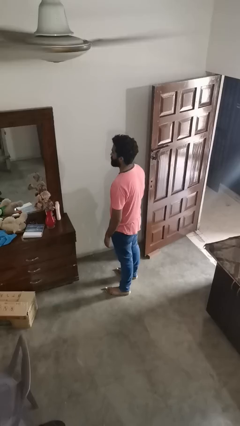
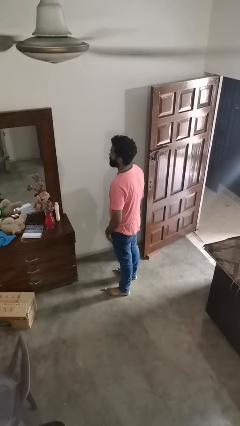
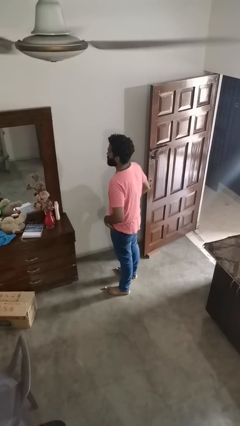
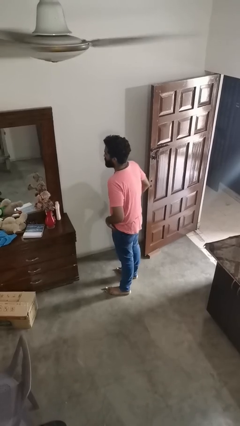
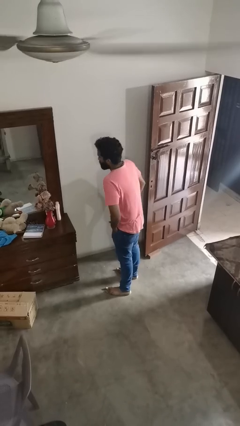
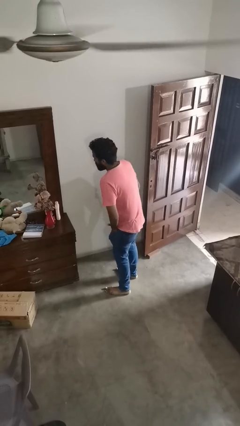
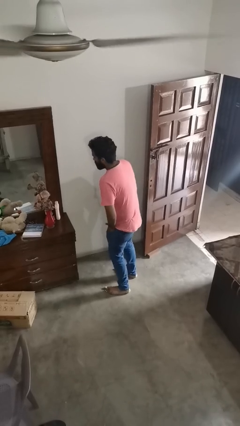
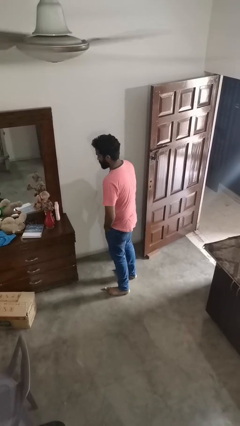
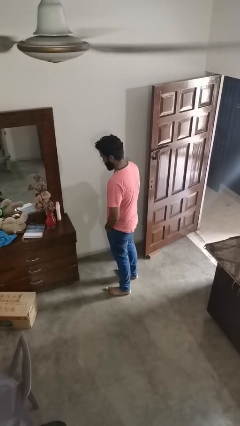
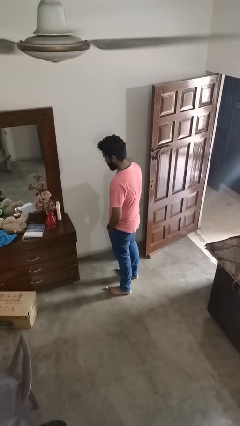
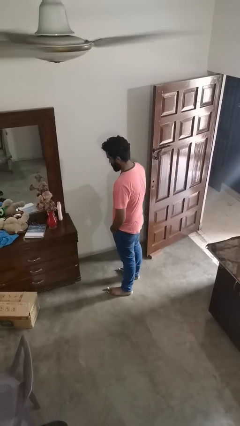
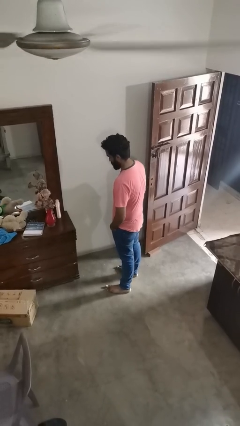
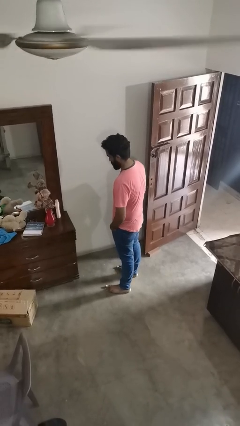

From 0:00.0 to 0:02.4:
person puts hands in back pockets

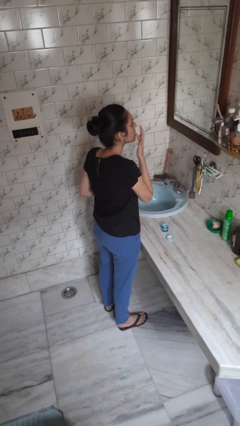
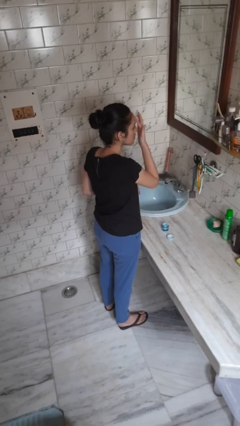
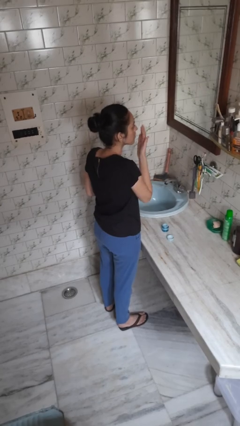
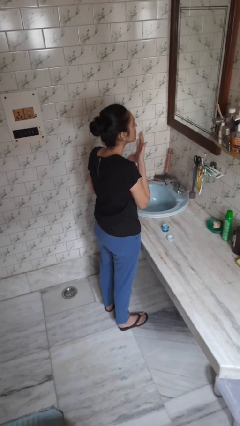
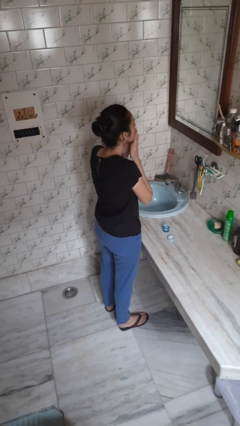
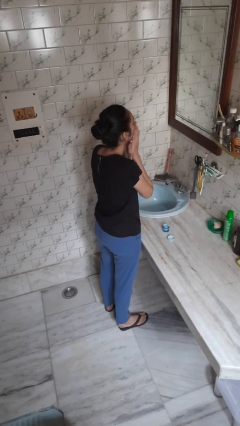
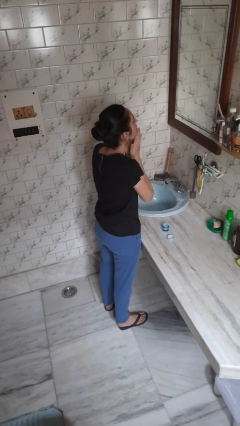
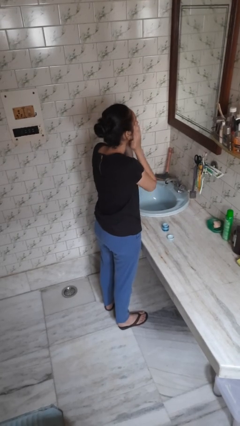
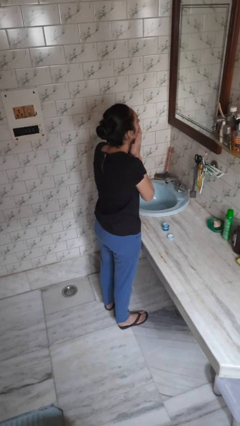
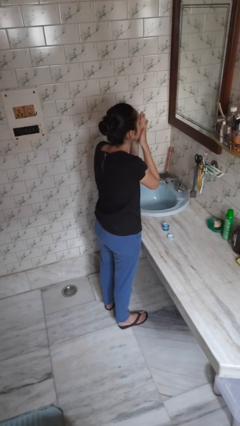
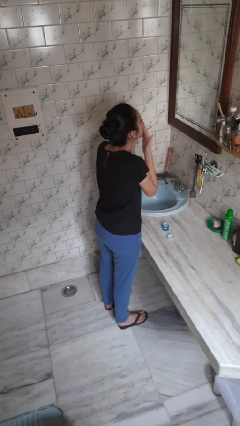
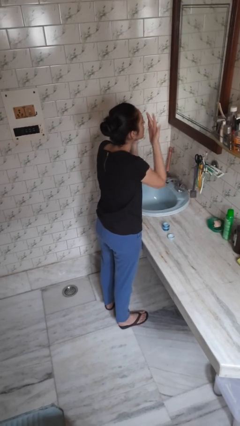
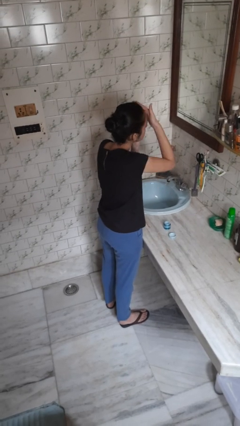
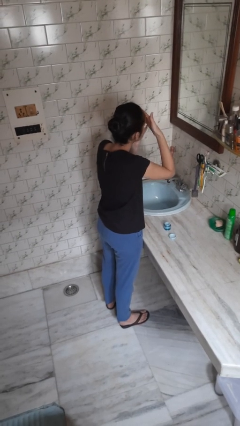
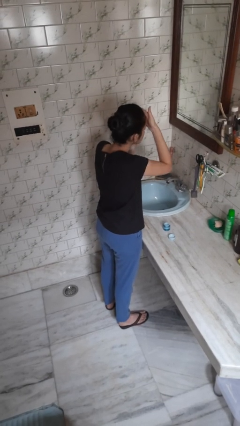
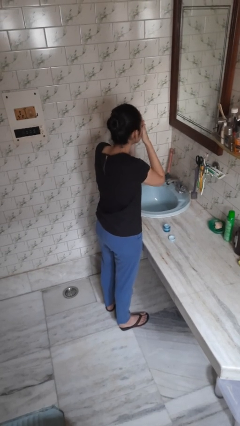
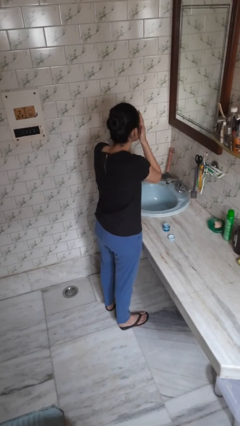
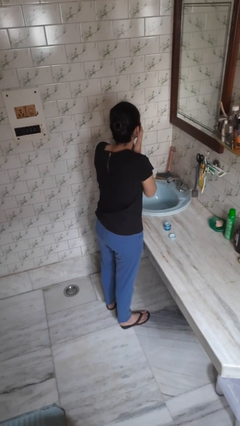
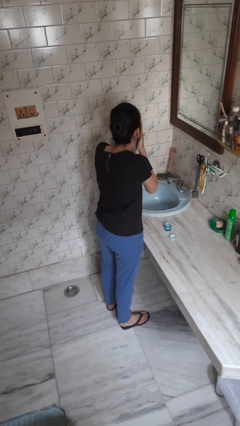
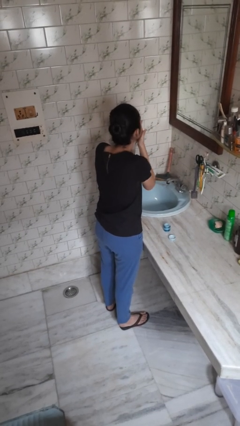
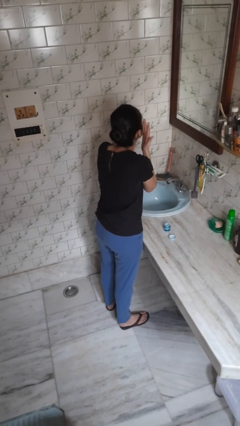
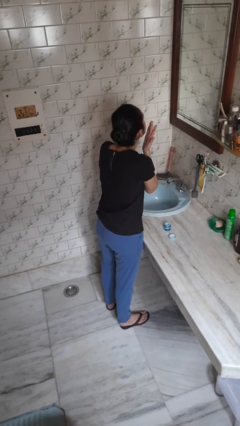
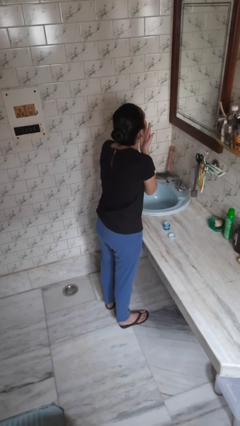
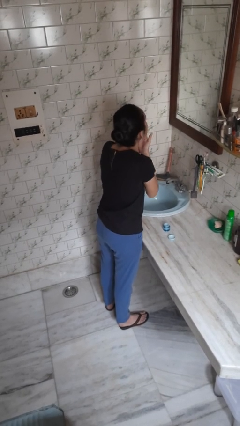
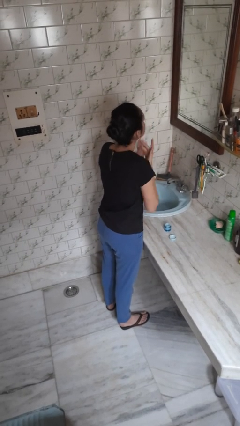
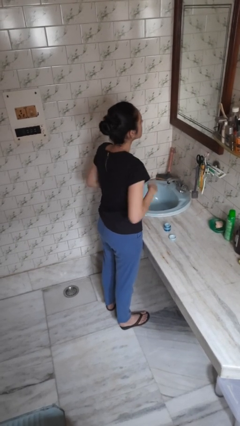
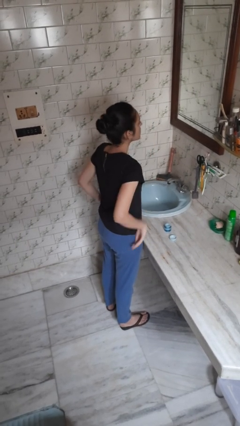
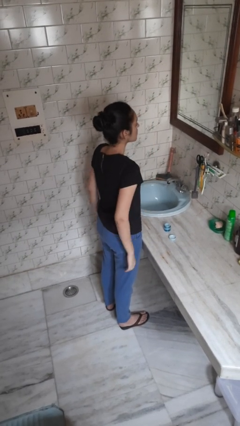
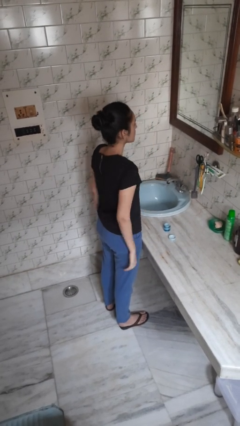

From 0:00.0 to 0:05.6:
person applies facial moisturizer

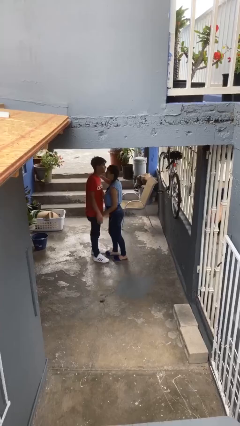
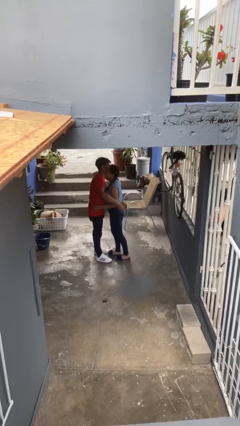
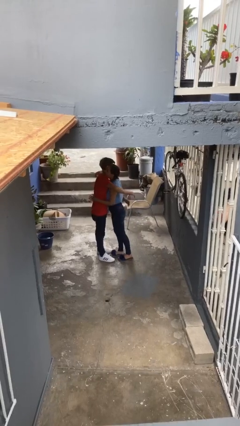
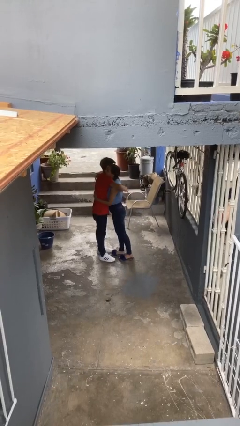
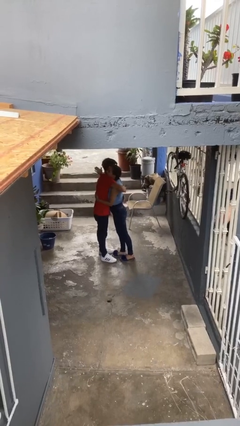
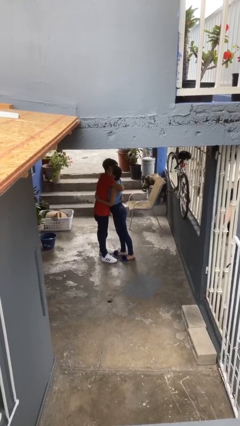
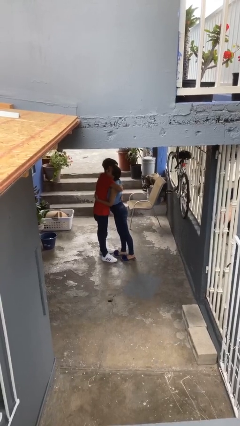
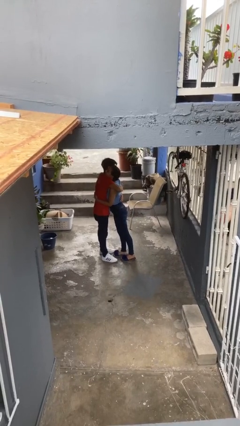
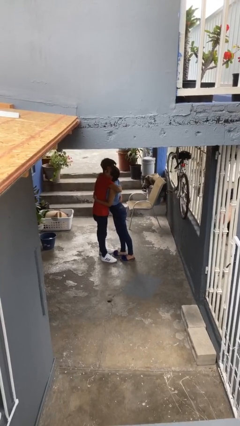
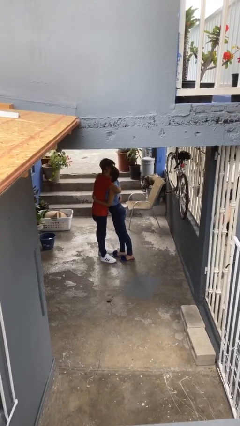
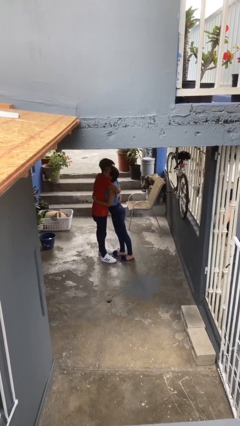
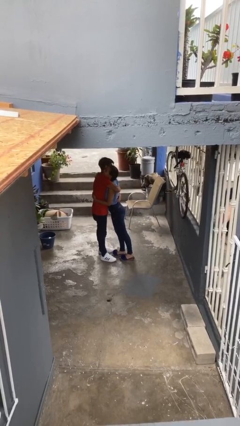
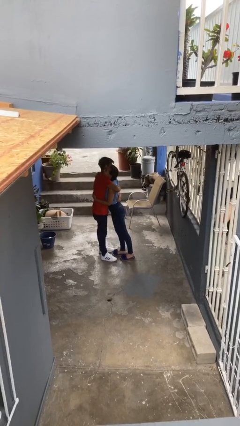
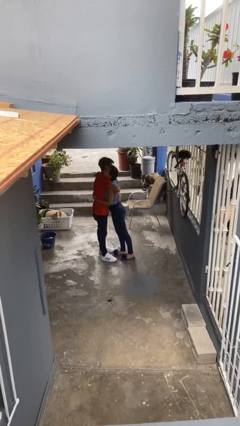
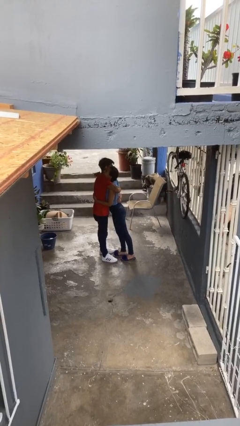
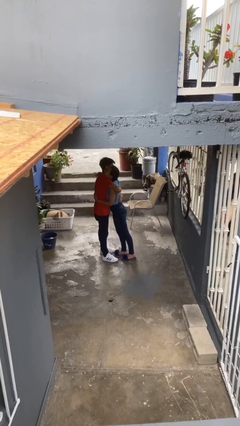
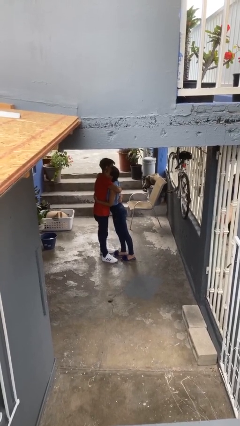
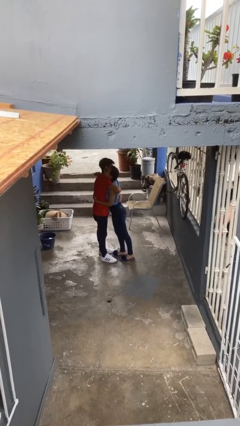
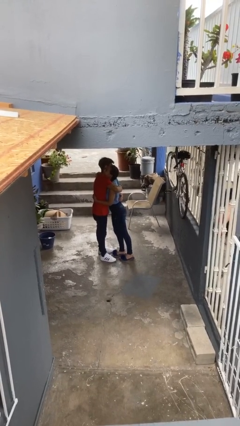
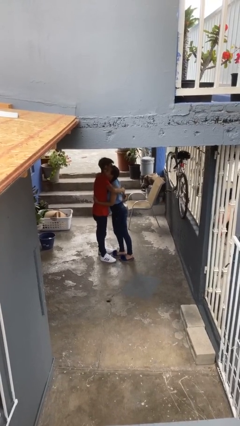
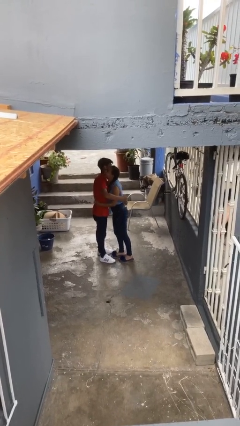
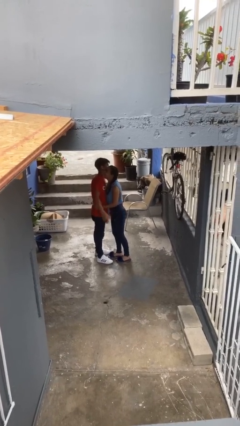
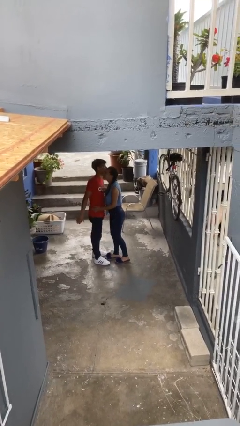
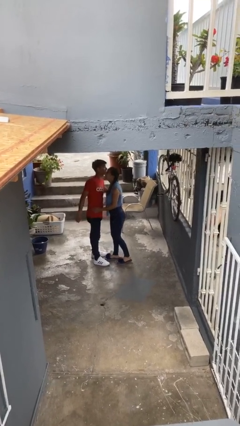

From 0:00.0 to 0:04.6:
person embraces person

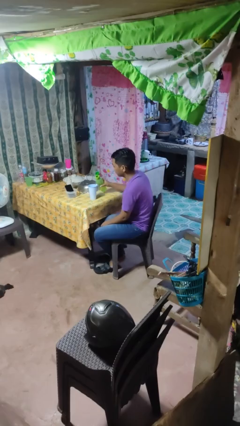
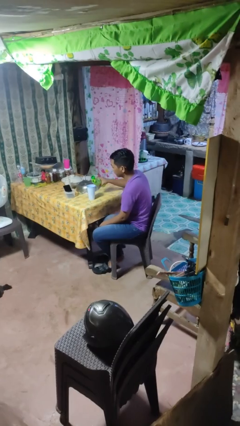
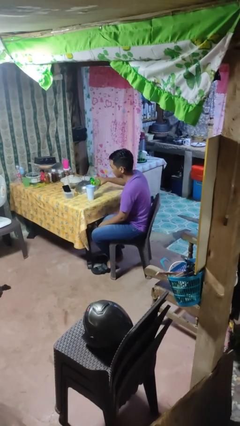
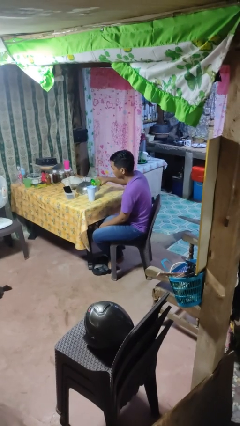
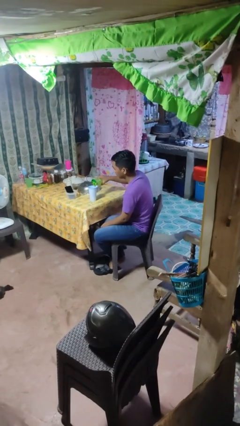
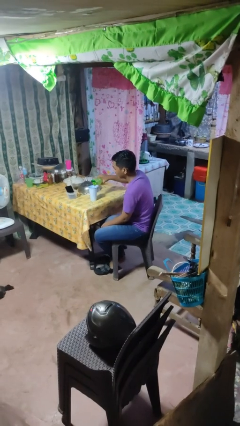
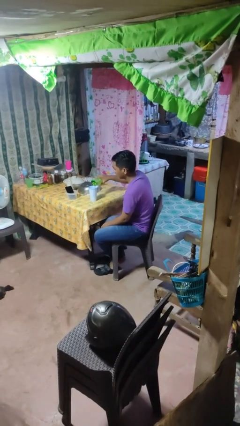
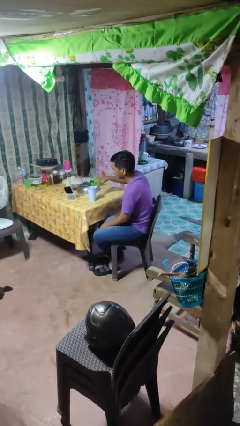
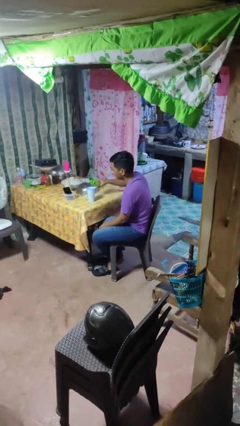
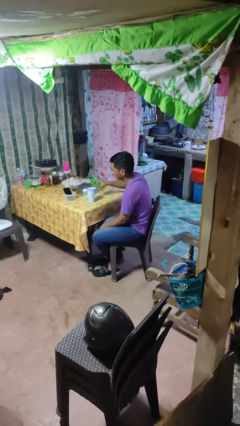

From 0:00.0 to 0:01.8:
person pours liquid into cup

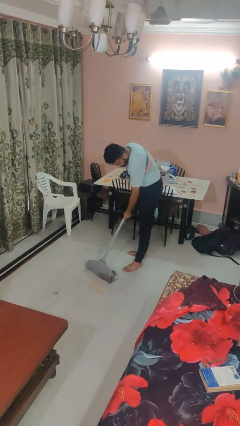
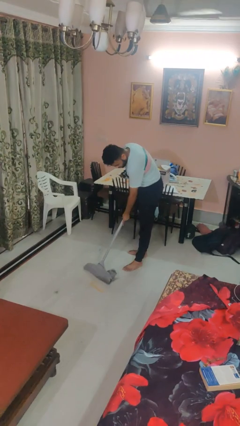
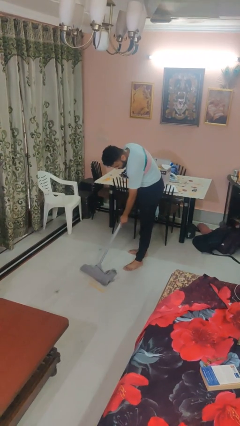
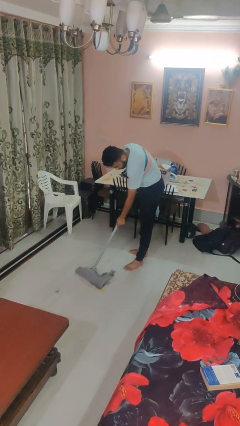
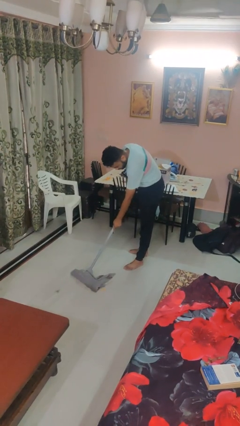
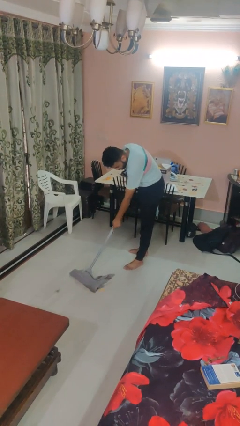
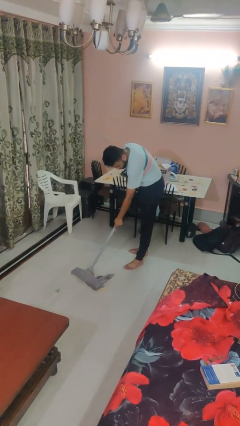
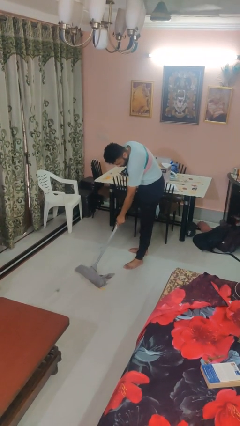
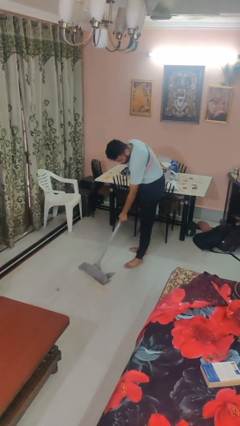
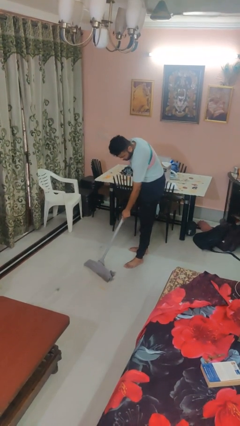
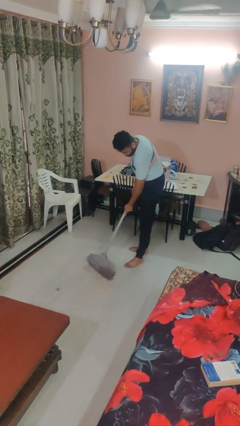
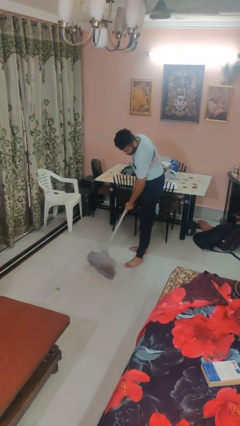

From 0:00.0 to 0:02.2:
person mops

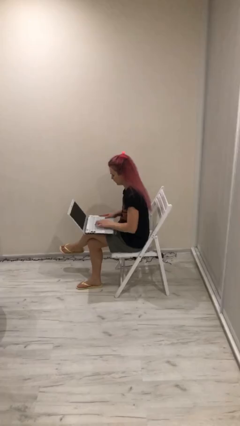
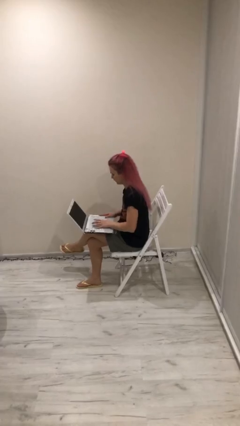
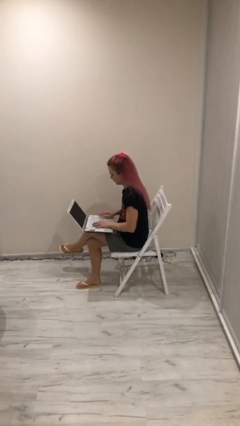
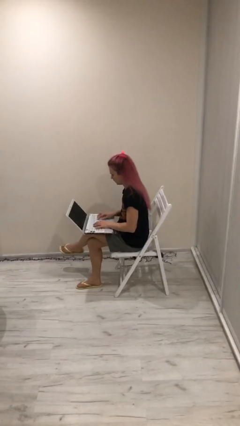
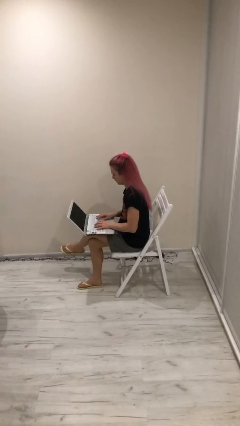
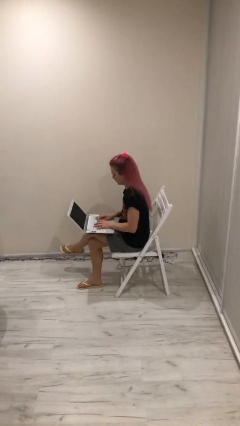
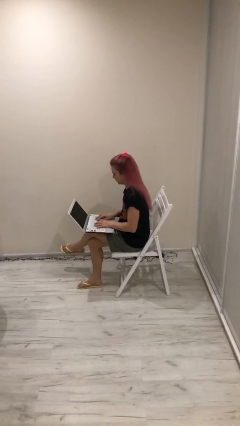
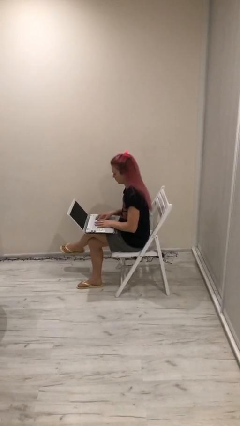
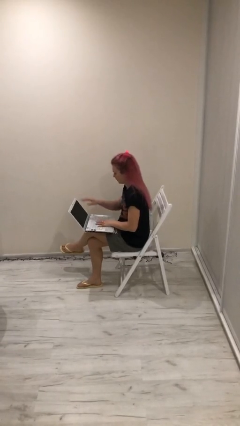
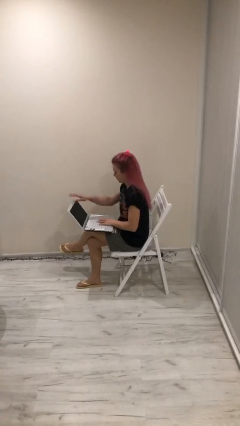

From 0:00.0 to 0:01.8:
person interacts with laptop
